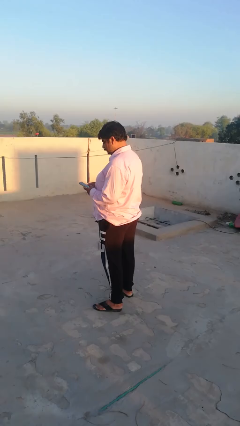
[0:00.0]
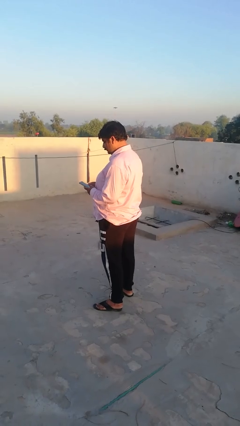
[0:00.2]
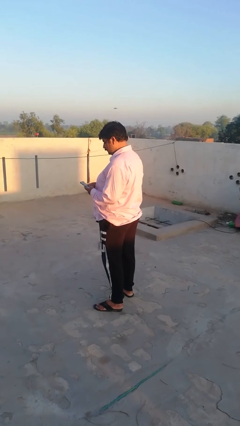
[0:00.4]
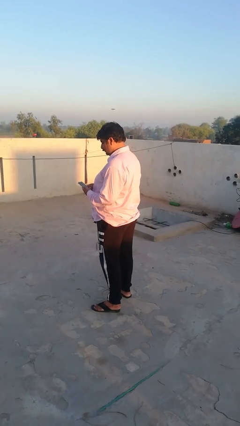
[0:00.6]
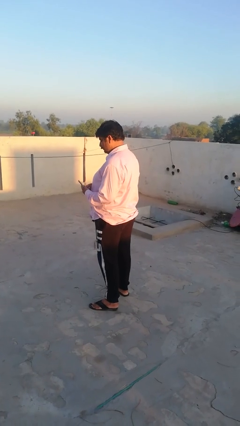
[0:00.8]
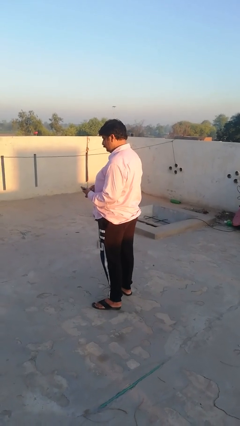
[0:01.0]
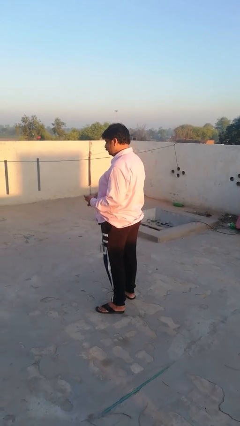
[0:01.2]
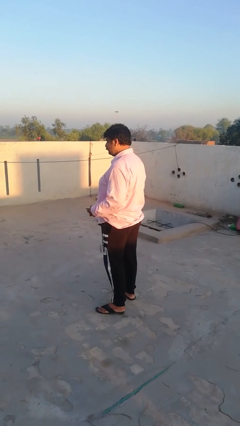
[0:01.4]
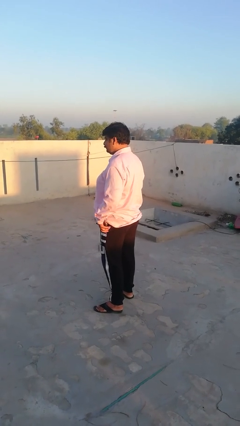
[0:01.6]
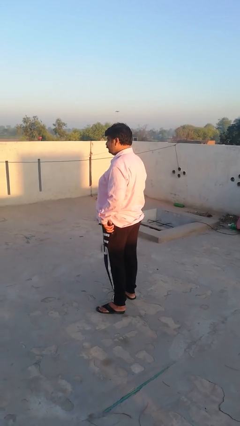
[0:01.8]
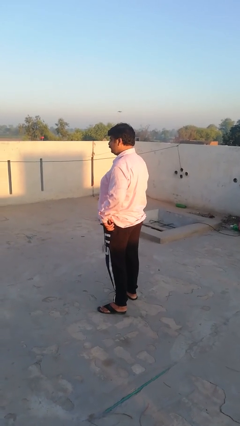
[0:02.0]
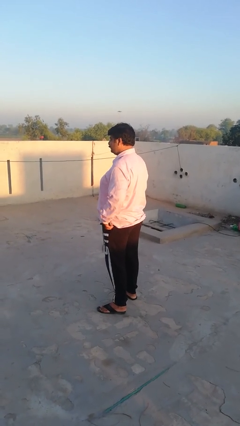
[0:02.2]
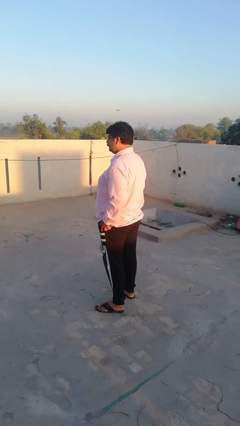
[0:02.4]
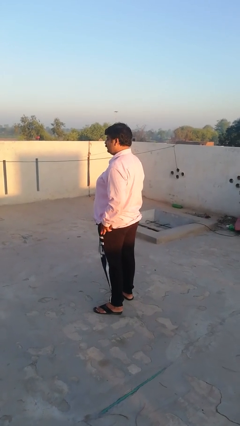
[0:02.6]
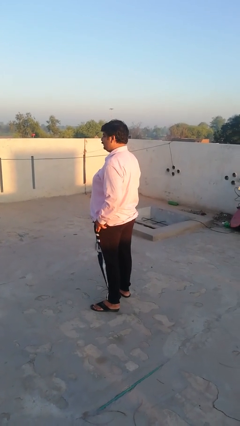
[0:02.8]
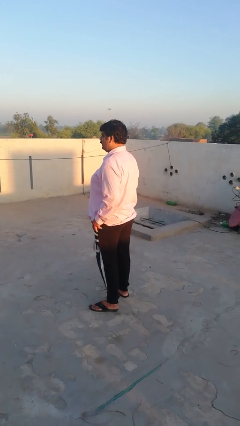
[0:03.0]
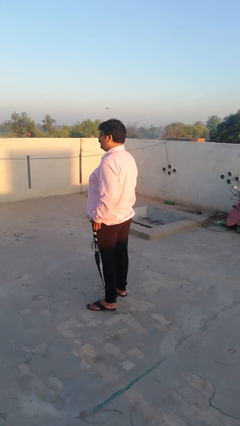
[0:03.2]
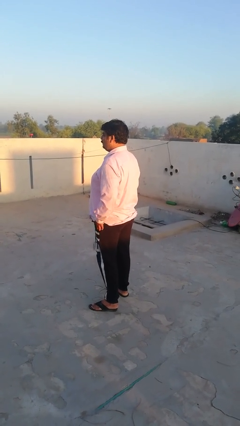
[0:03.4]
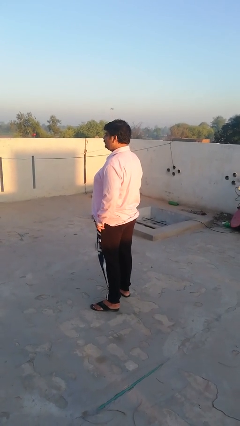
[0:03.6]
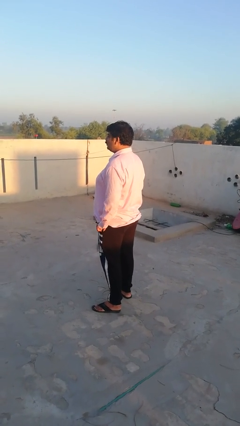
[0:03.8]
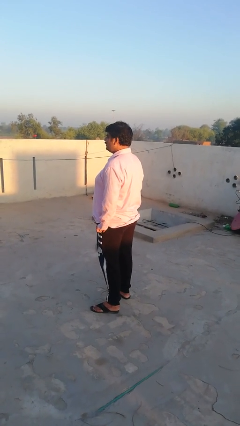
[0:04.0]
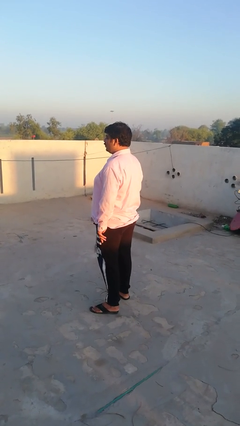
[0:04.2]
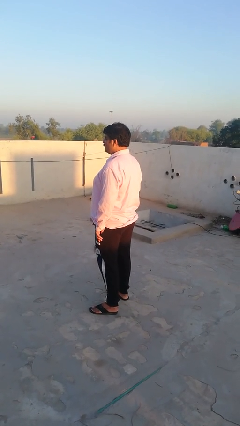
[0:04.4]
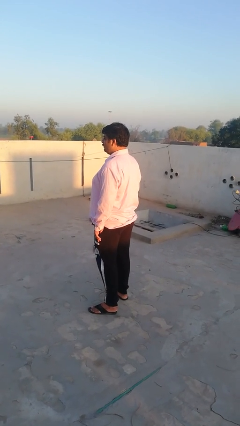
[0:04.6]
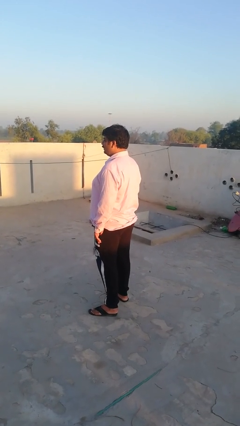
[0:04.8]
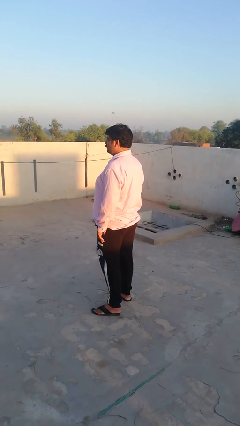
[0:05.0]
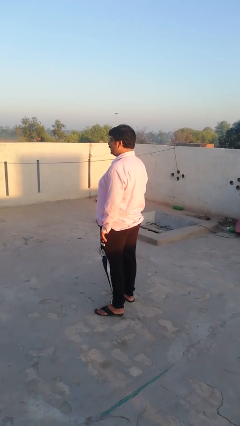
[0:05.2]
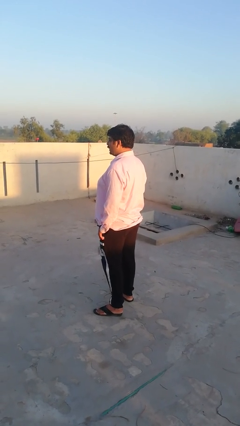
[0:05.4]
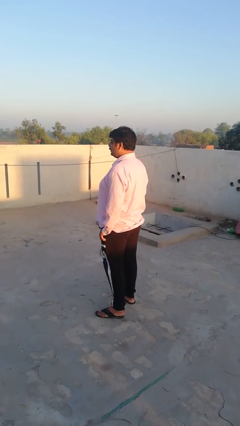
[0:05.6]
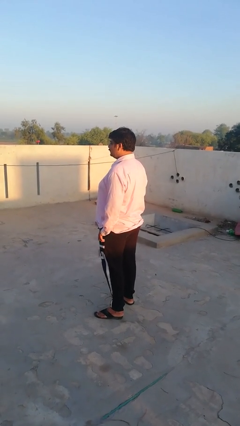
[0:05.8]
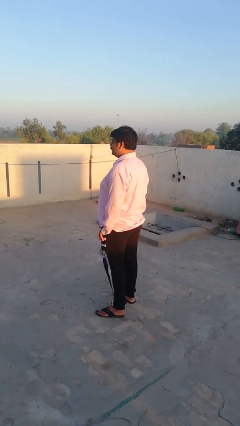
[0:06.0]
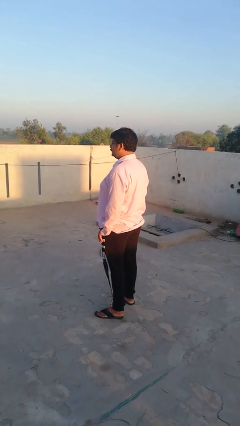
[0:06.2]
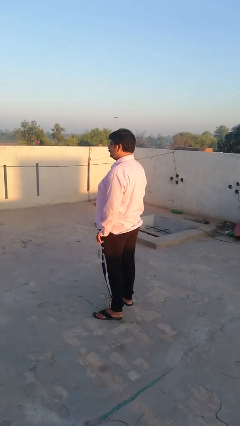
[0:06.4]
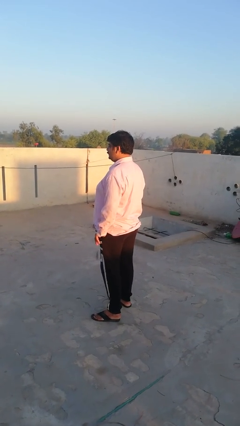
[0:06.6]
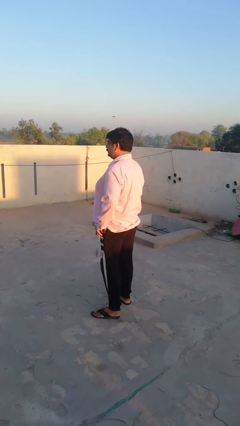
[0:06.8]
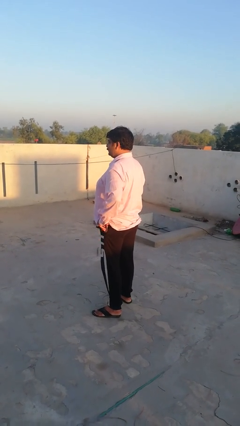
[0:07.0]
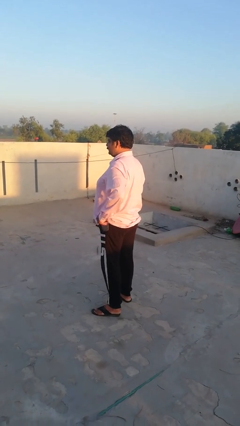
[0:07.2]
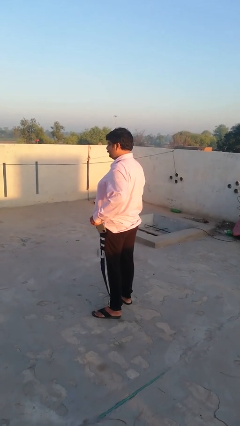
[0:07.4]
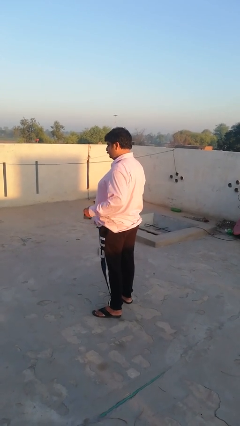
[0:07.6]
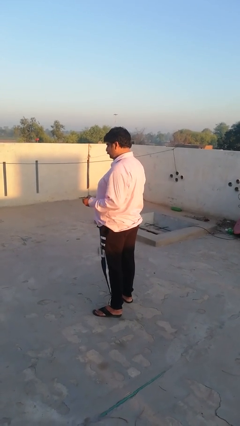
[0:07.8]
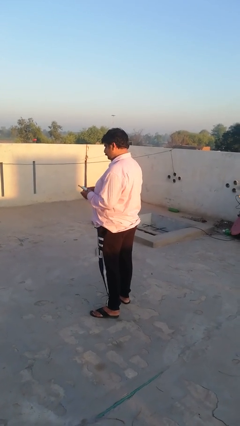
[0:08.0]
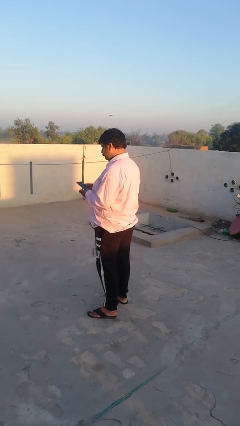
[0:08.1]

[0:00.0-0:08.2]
person puts phone into pocket

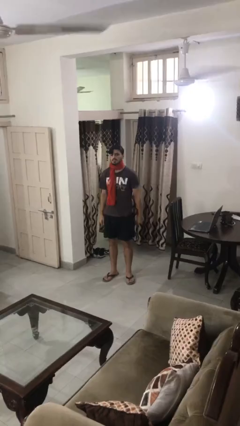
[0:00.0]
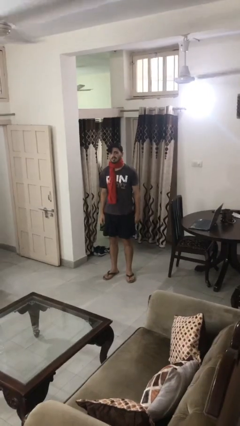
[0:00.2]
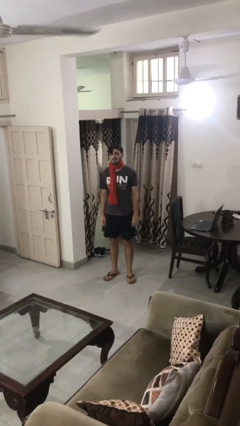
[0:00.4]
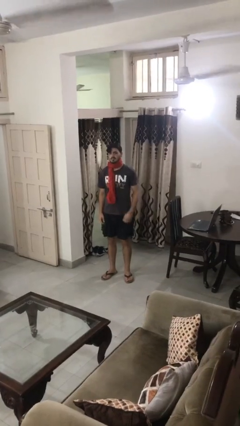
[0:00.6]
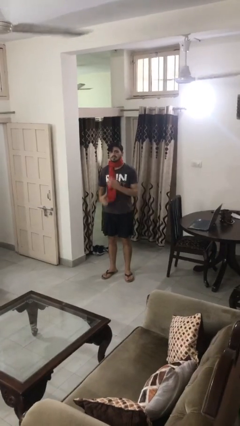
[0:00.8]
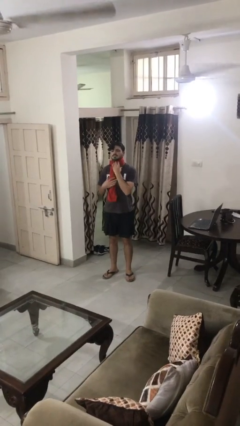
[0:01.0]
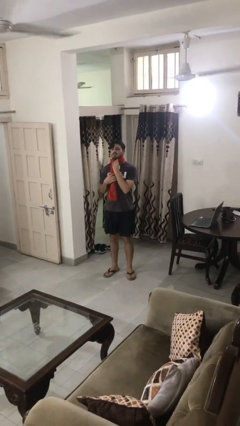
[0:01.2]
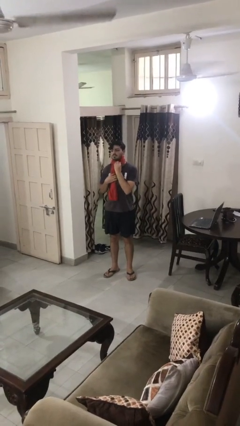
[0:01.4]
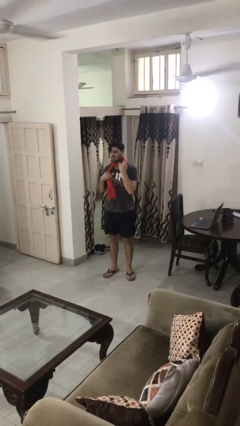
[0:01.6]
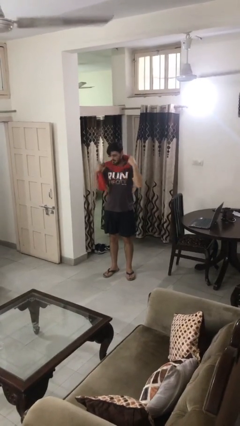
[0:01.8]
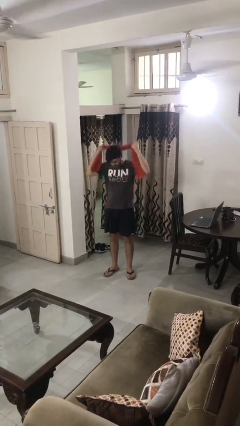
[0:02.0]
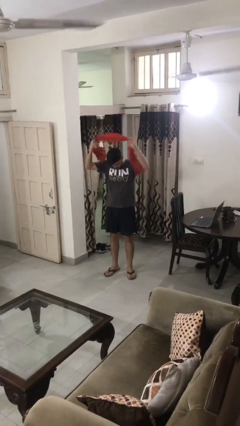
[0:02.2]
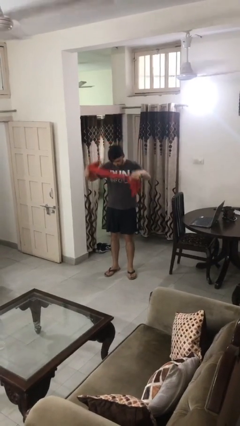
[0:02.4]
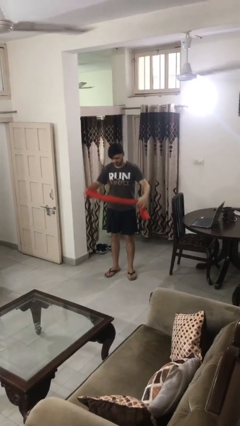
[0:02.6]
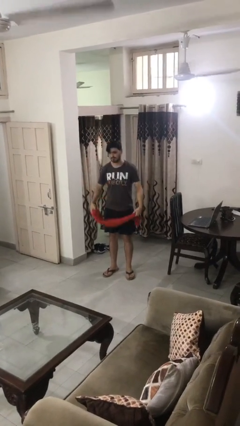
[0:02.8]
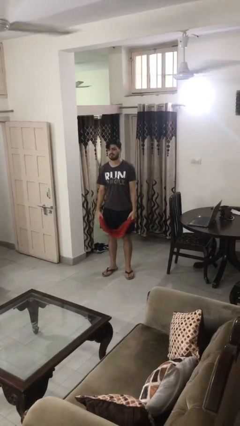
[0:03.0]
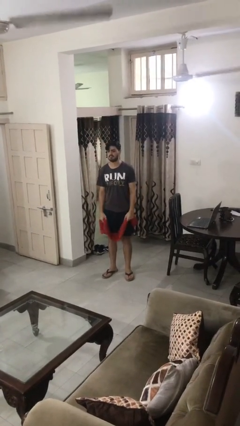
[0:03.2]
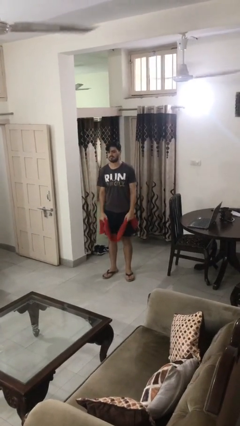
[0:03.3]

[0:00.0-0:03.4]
person takes off scarf

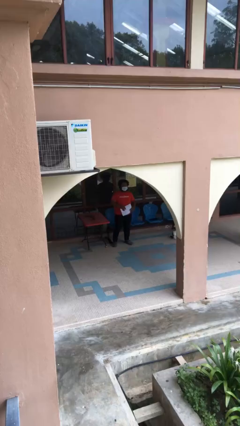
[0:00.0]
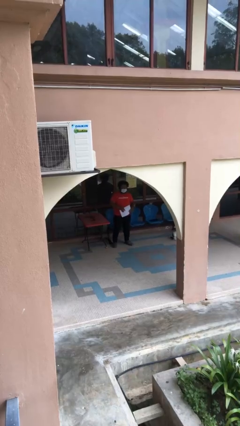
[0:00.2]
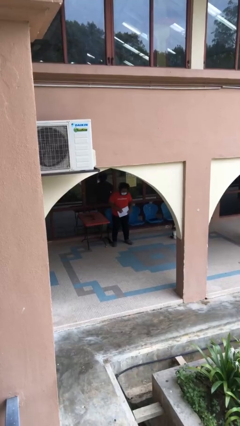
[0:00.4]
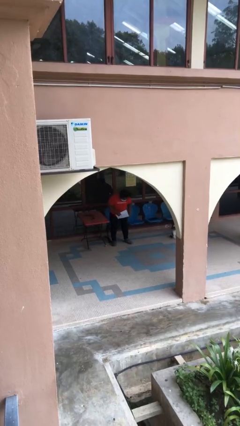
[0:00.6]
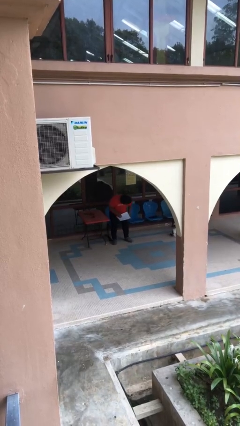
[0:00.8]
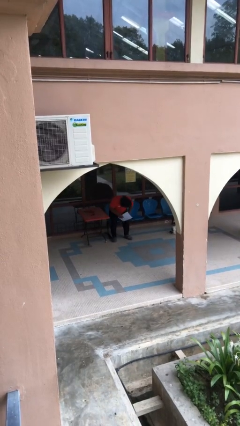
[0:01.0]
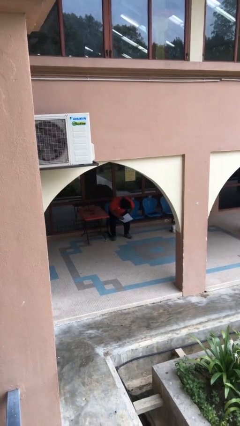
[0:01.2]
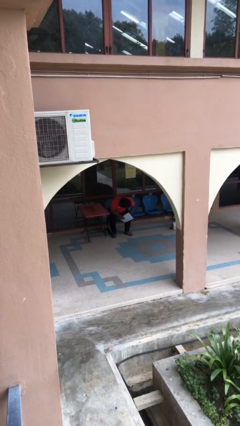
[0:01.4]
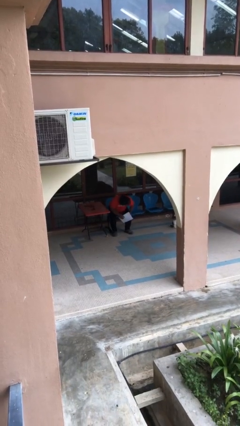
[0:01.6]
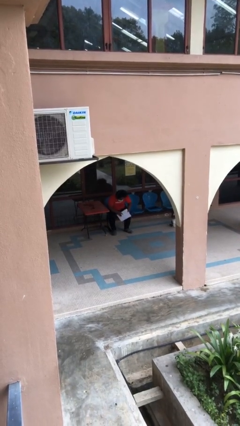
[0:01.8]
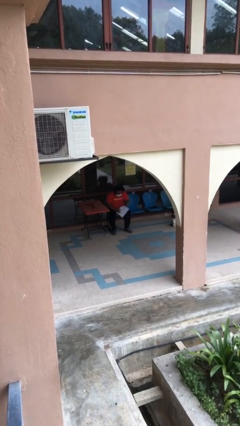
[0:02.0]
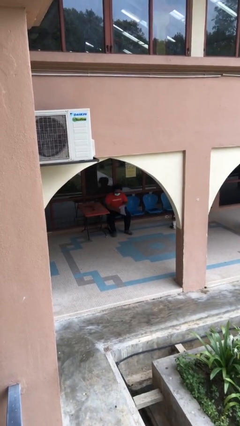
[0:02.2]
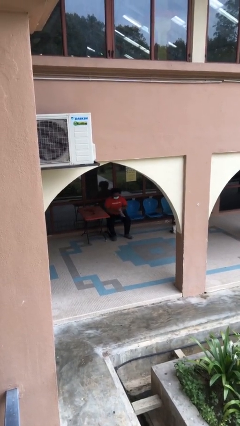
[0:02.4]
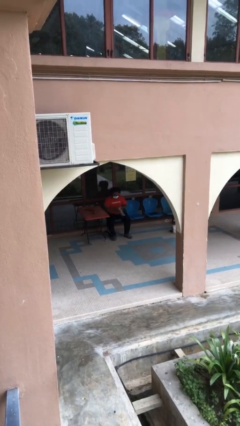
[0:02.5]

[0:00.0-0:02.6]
person sits down

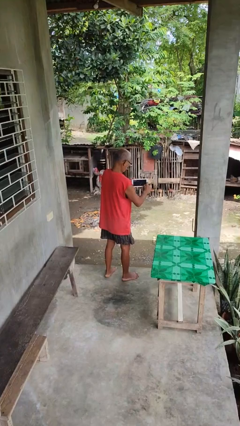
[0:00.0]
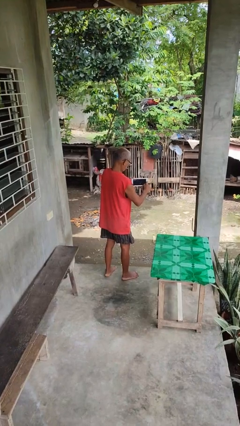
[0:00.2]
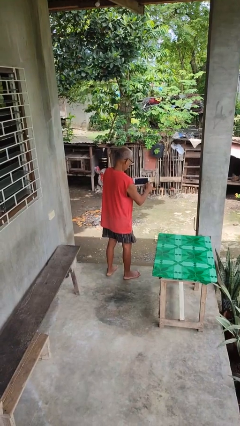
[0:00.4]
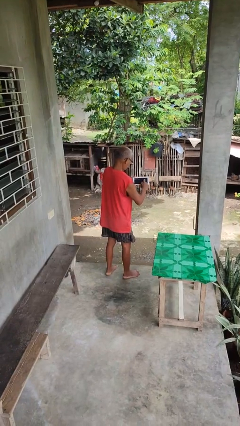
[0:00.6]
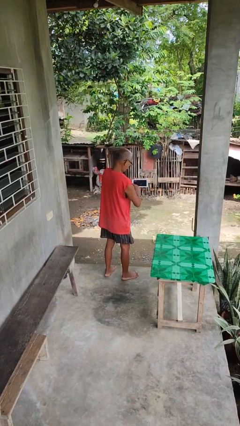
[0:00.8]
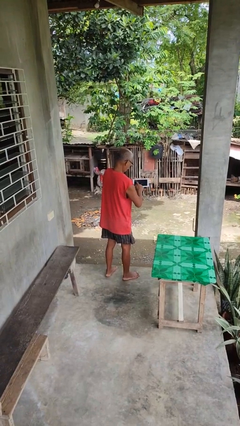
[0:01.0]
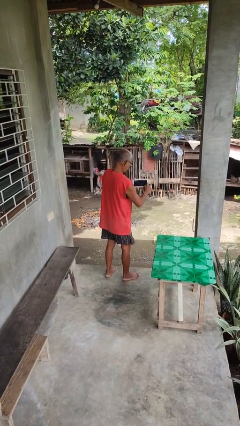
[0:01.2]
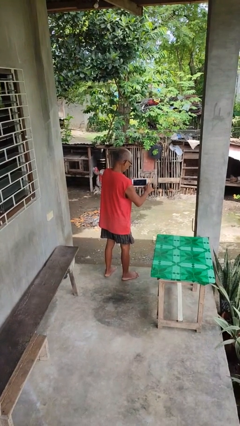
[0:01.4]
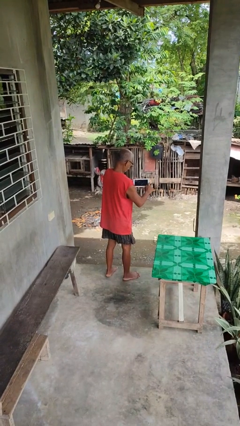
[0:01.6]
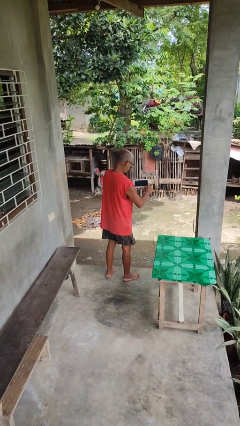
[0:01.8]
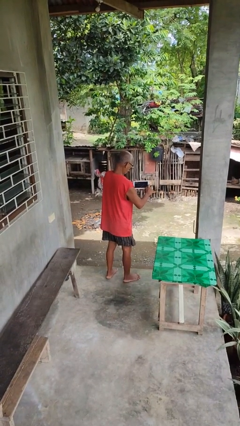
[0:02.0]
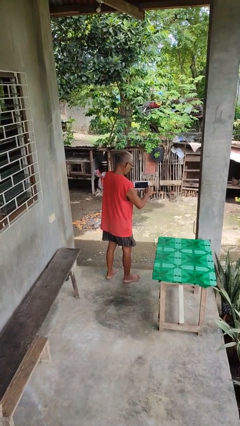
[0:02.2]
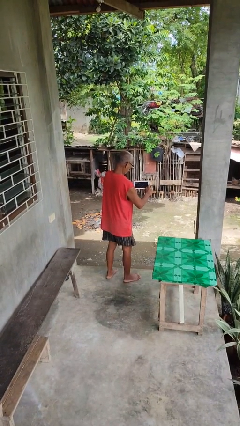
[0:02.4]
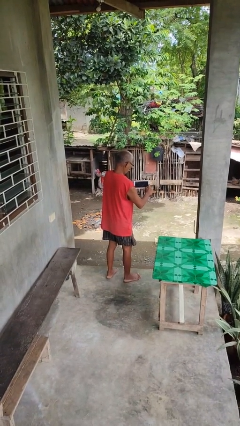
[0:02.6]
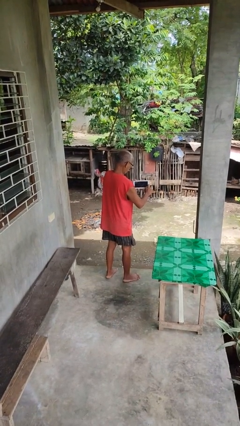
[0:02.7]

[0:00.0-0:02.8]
person interacts with tablet

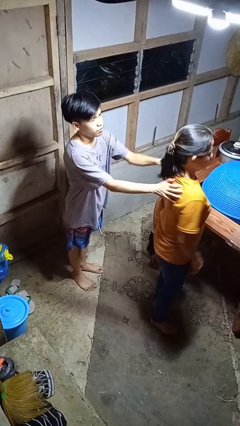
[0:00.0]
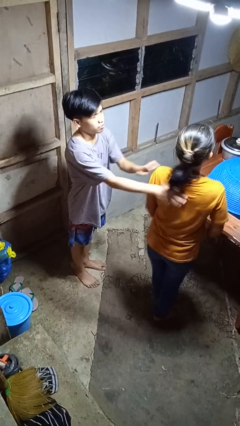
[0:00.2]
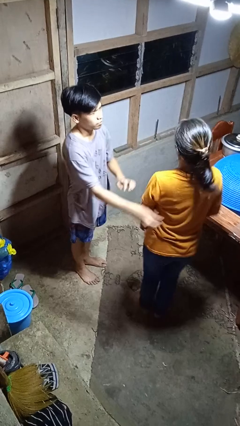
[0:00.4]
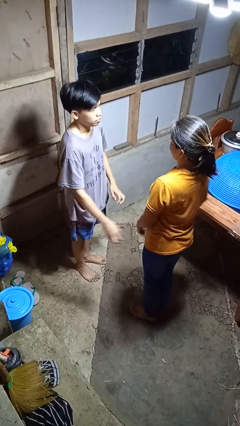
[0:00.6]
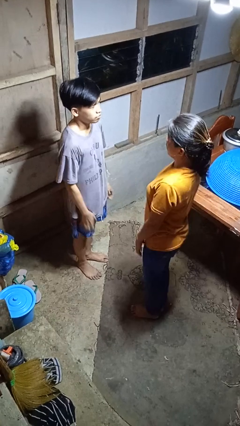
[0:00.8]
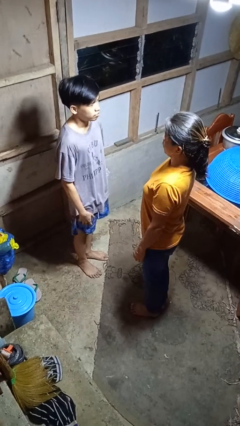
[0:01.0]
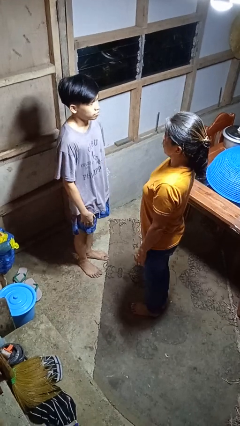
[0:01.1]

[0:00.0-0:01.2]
person spins person around
